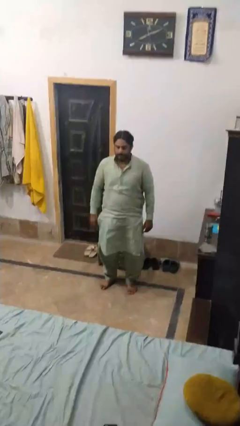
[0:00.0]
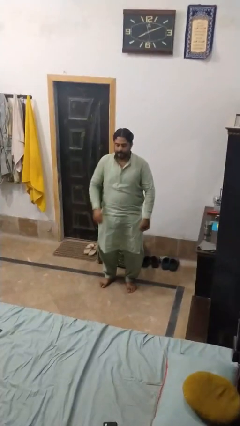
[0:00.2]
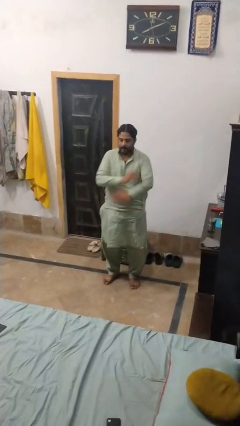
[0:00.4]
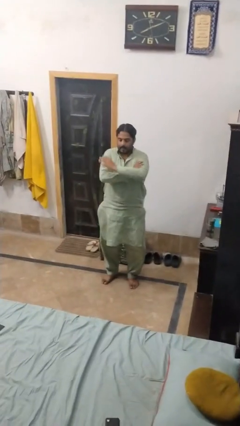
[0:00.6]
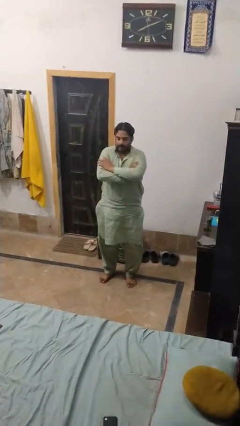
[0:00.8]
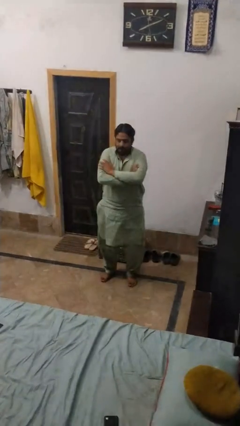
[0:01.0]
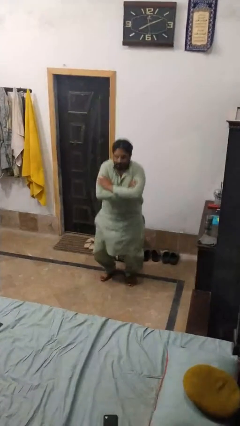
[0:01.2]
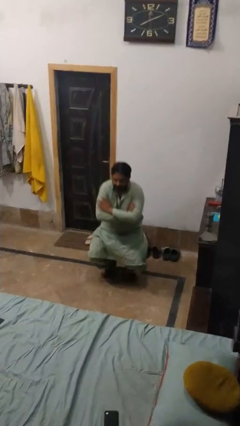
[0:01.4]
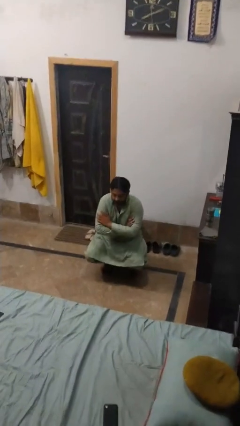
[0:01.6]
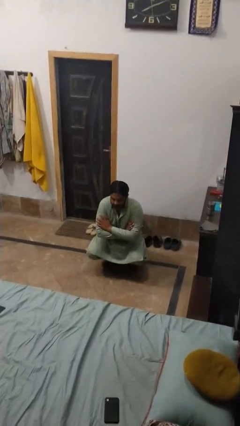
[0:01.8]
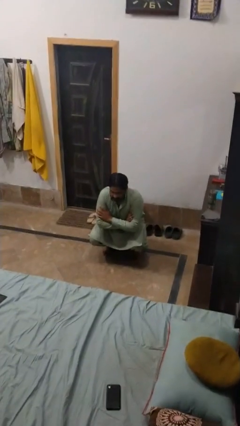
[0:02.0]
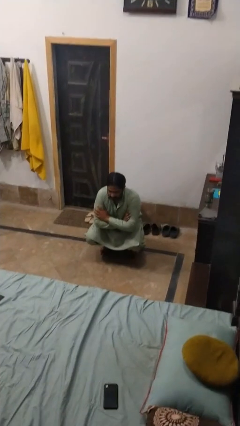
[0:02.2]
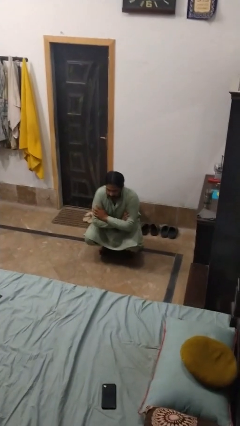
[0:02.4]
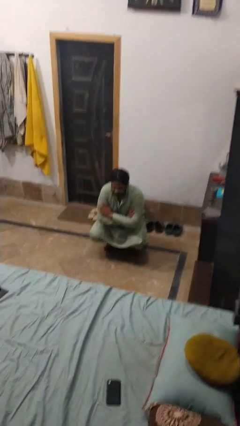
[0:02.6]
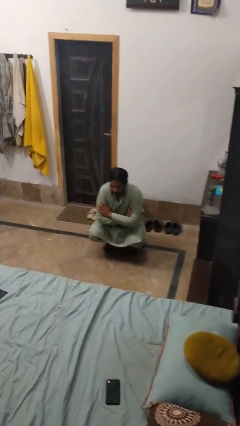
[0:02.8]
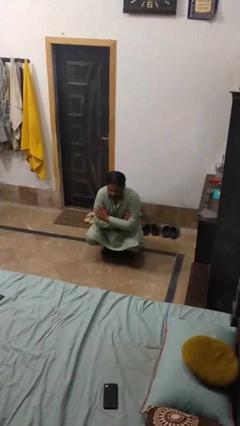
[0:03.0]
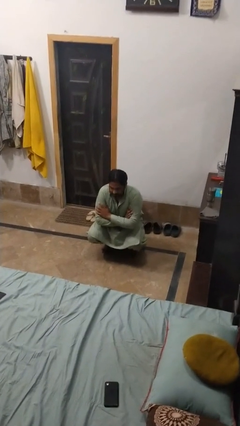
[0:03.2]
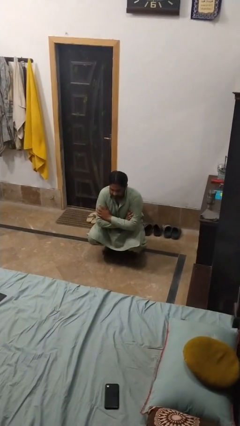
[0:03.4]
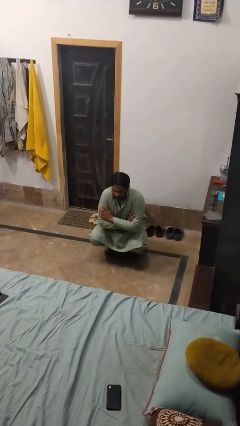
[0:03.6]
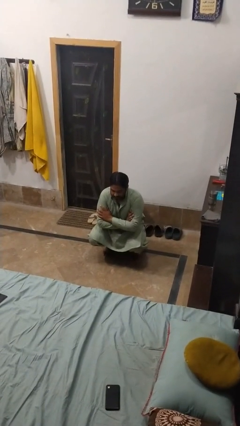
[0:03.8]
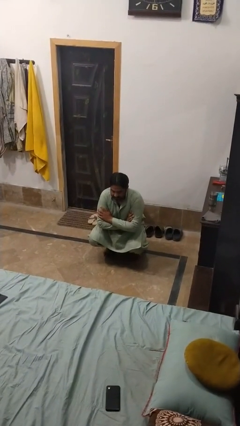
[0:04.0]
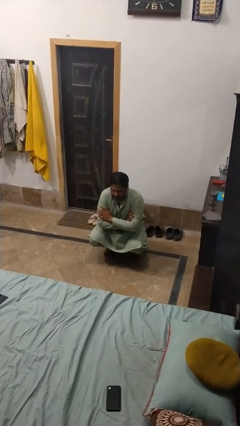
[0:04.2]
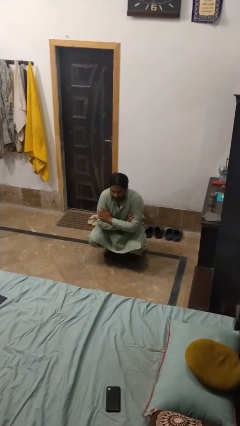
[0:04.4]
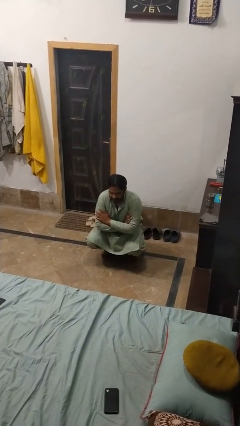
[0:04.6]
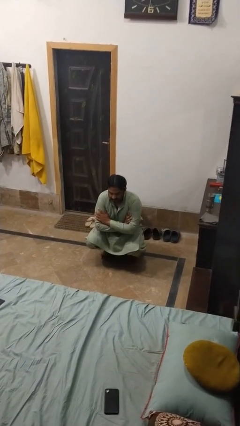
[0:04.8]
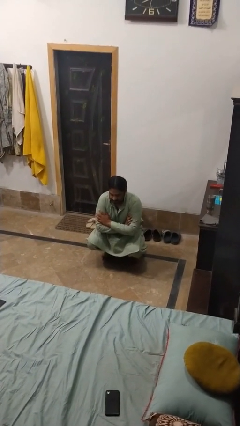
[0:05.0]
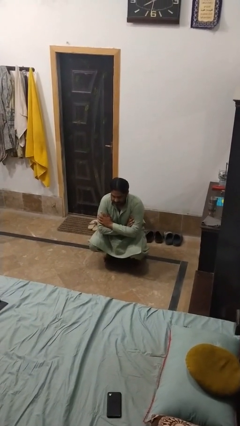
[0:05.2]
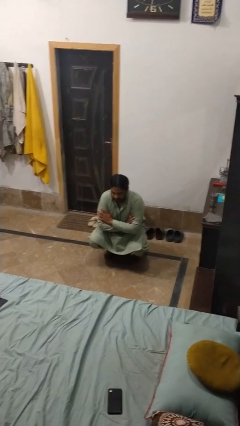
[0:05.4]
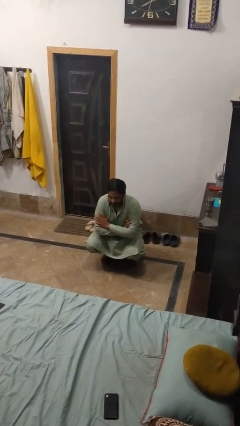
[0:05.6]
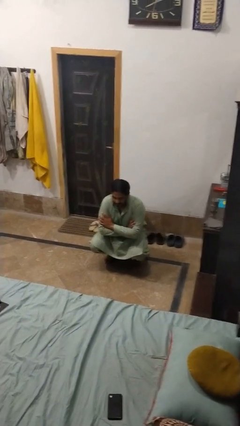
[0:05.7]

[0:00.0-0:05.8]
person squats

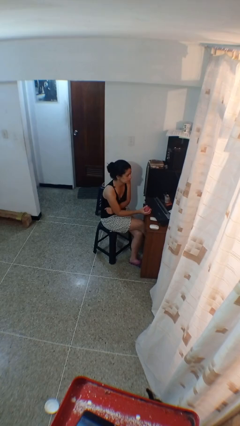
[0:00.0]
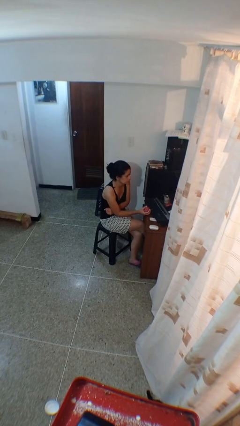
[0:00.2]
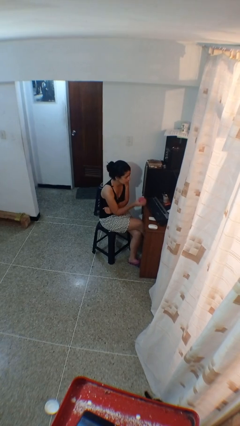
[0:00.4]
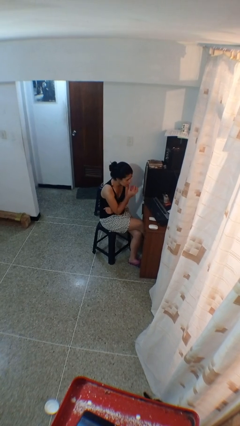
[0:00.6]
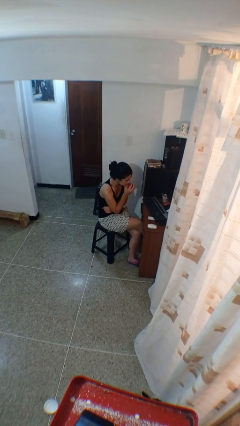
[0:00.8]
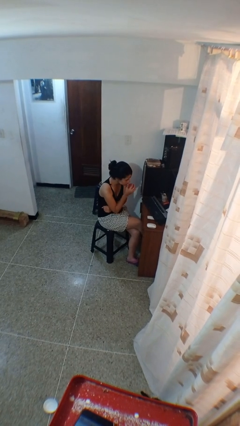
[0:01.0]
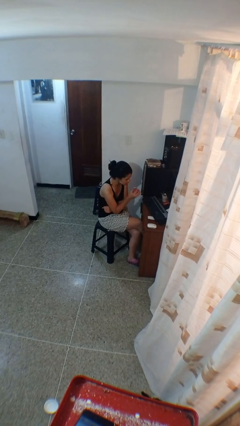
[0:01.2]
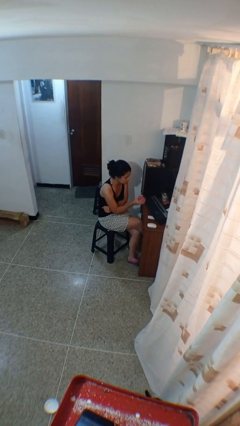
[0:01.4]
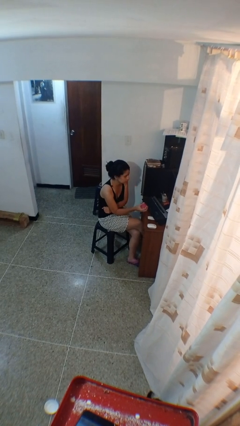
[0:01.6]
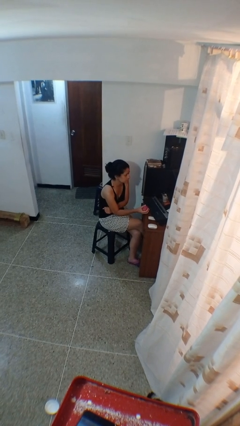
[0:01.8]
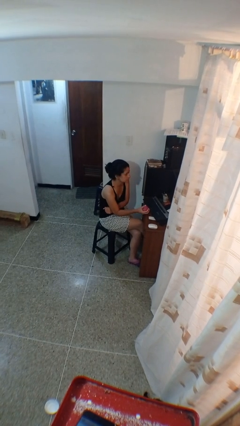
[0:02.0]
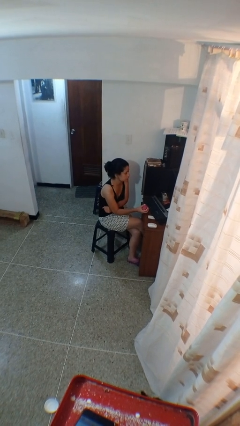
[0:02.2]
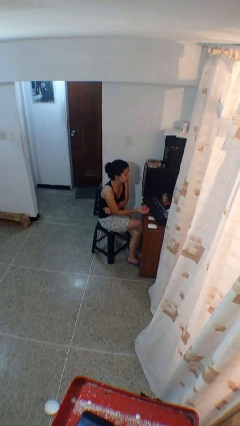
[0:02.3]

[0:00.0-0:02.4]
person eats apple

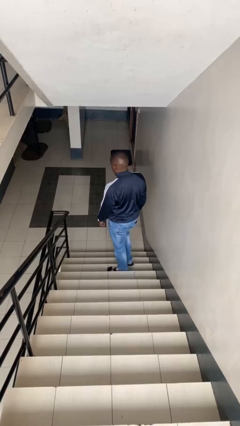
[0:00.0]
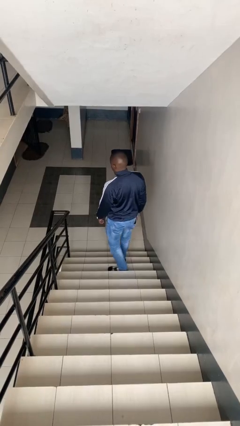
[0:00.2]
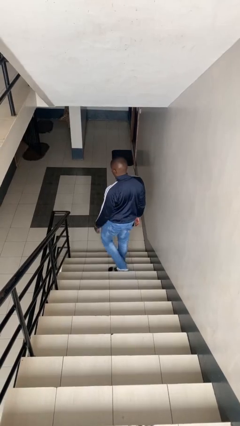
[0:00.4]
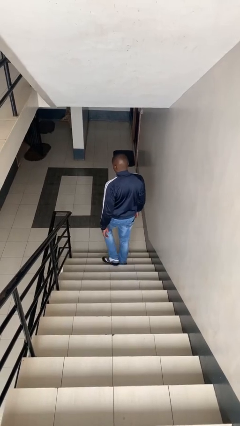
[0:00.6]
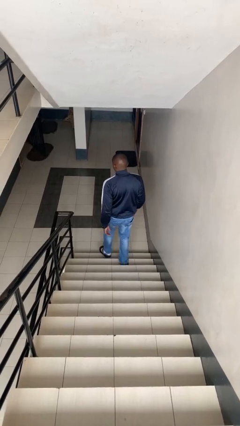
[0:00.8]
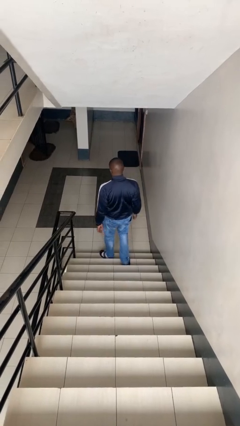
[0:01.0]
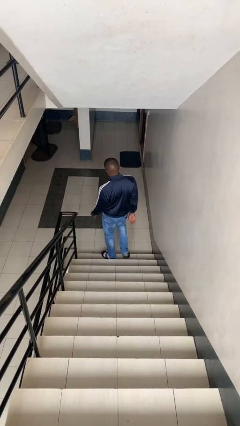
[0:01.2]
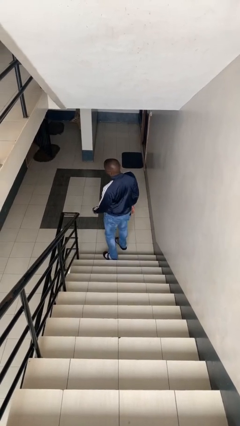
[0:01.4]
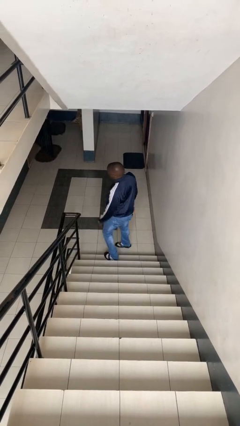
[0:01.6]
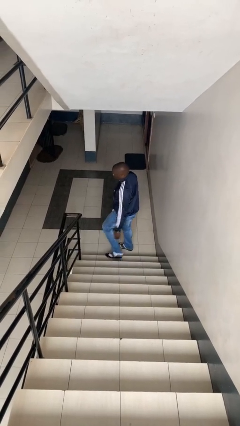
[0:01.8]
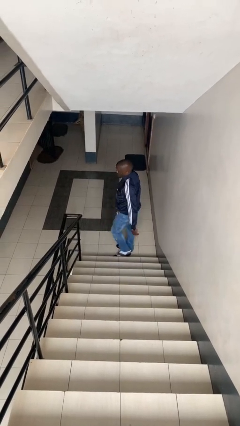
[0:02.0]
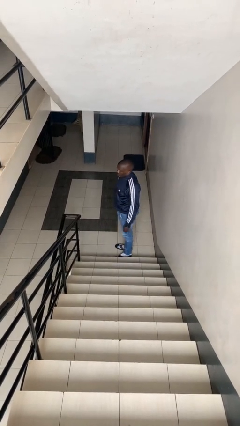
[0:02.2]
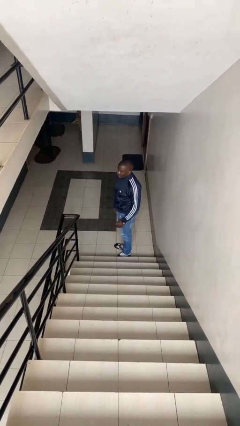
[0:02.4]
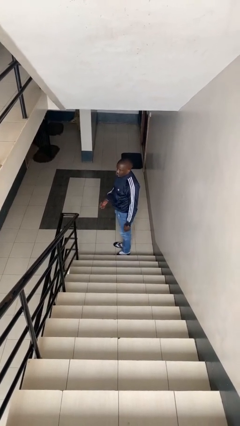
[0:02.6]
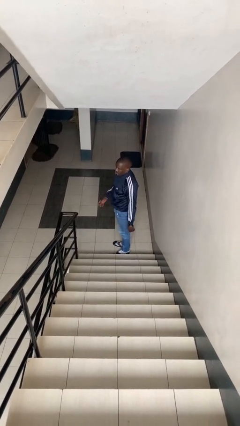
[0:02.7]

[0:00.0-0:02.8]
person climbs down stairs

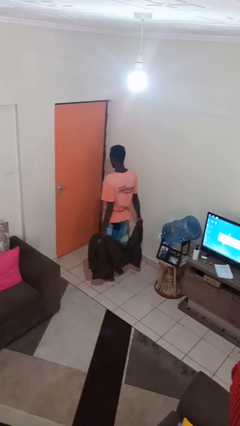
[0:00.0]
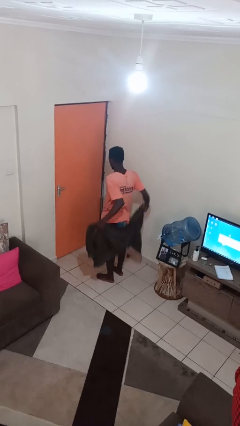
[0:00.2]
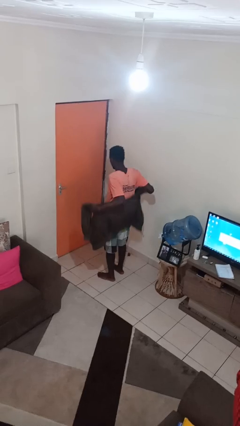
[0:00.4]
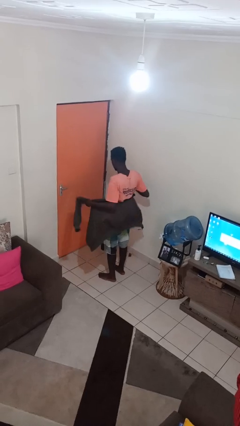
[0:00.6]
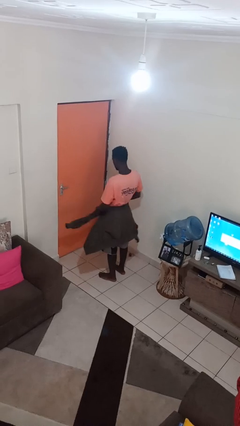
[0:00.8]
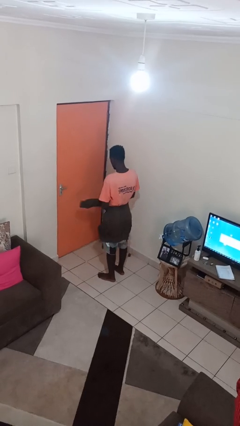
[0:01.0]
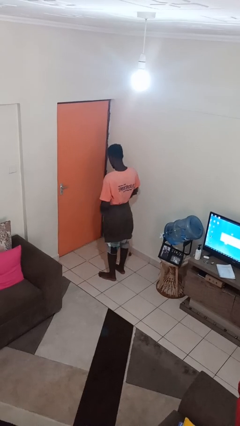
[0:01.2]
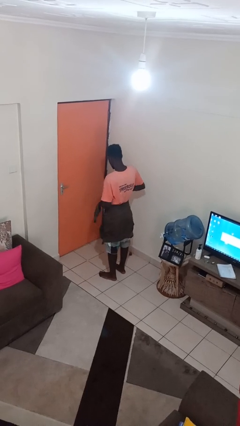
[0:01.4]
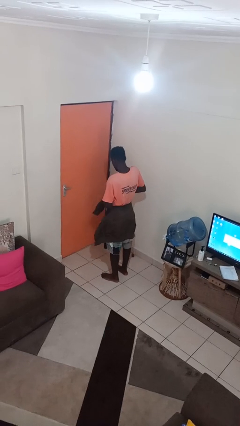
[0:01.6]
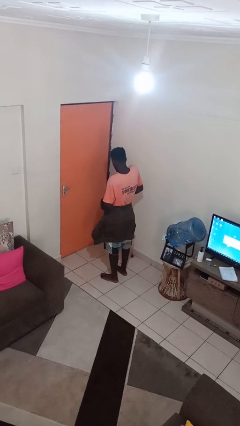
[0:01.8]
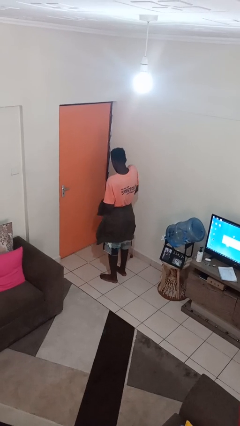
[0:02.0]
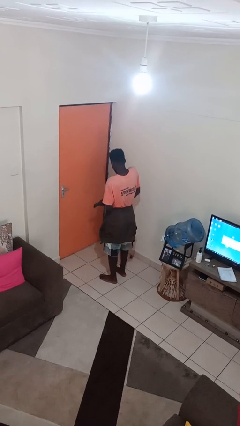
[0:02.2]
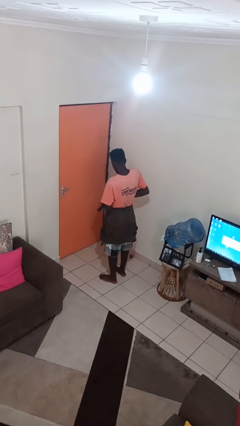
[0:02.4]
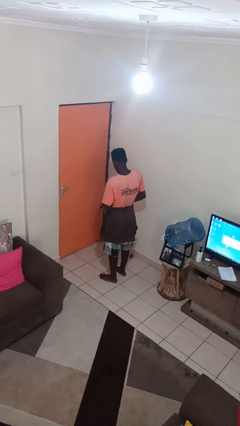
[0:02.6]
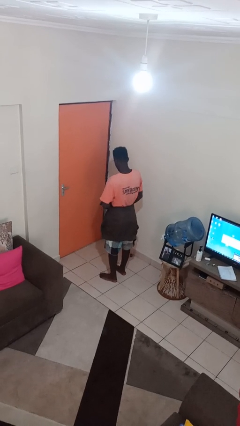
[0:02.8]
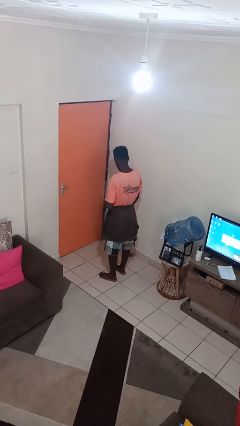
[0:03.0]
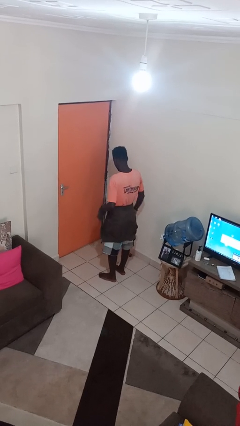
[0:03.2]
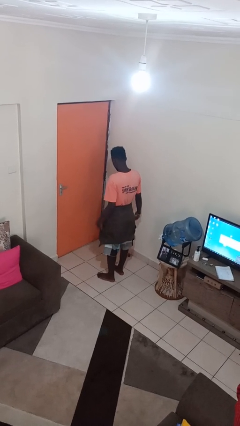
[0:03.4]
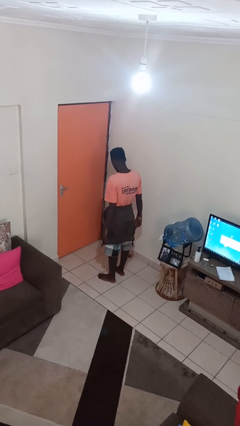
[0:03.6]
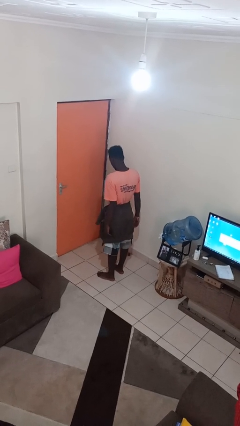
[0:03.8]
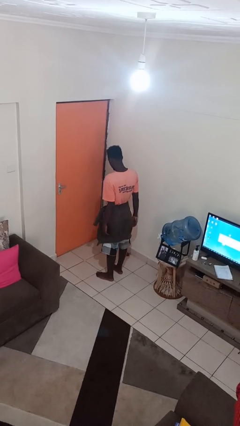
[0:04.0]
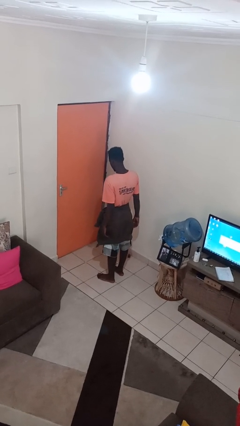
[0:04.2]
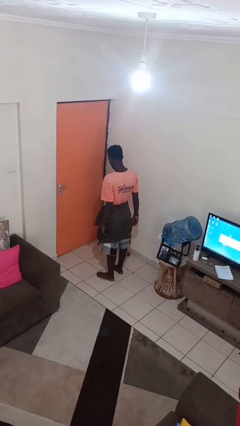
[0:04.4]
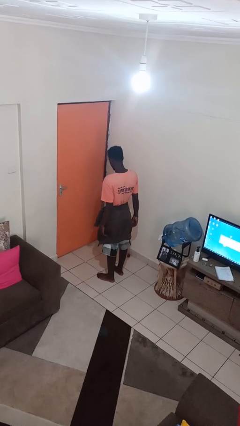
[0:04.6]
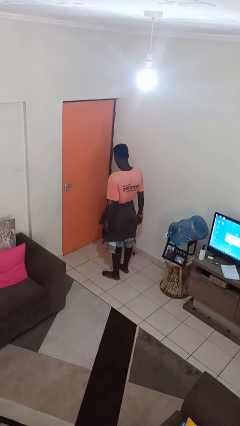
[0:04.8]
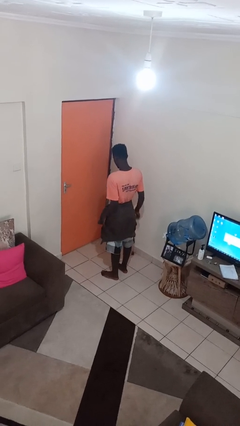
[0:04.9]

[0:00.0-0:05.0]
person ties jacket around waist

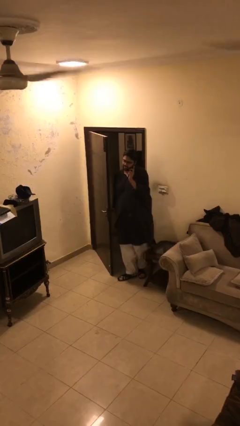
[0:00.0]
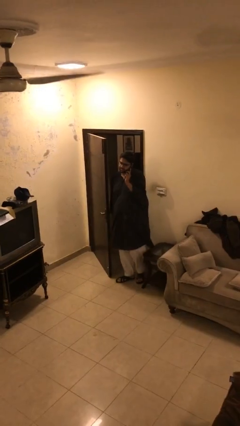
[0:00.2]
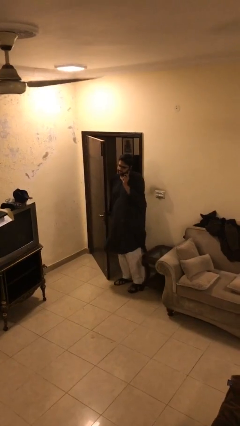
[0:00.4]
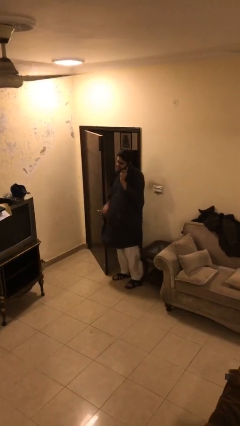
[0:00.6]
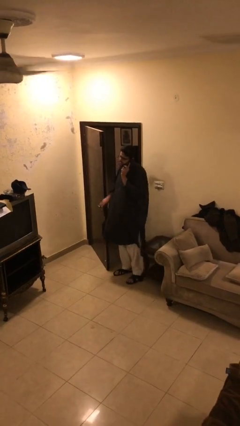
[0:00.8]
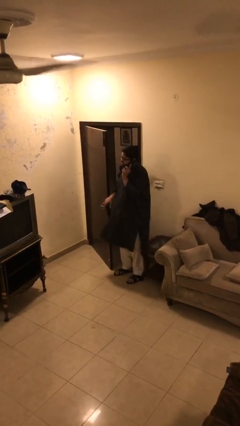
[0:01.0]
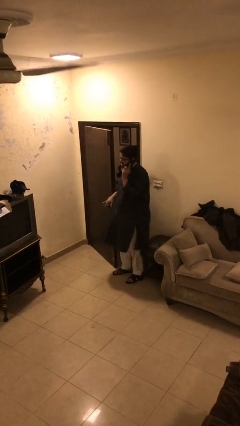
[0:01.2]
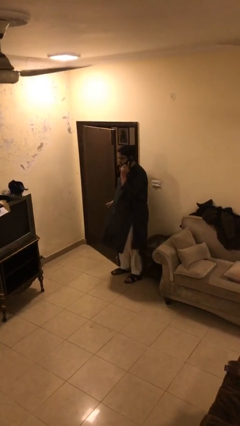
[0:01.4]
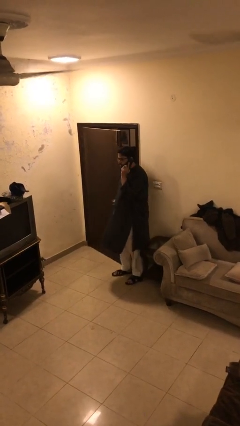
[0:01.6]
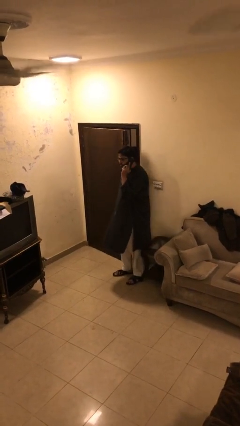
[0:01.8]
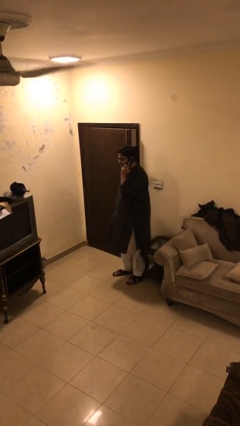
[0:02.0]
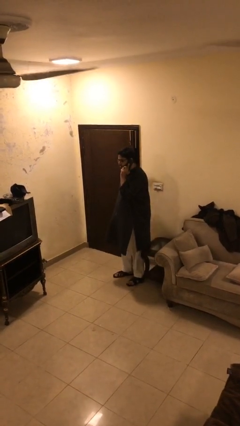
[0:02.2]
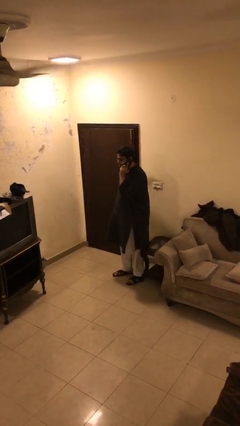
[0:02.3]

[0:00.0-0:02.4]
person closes facility door
